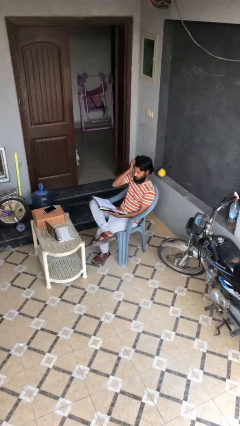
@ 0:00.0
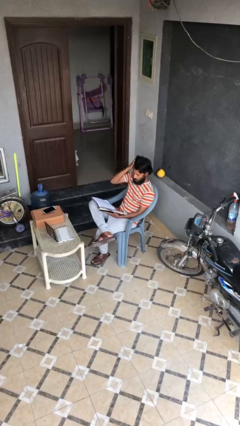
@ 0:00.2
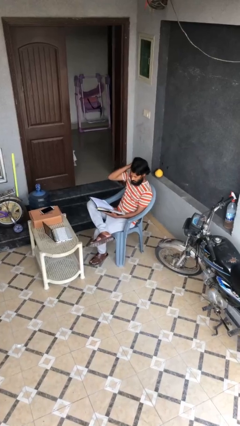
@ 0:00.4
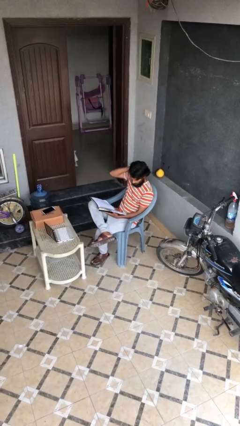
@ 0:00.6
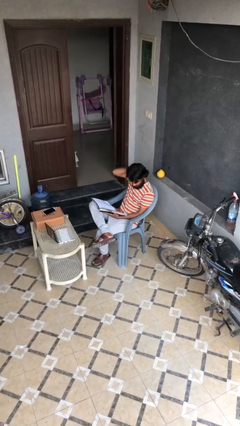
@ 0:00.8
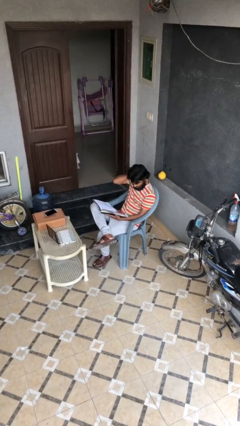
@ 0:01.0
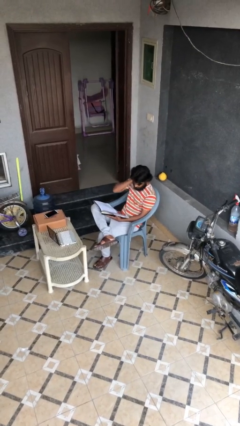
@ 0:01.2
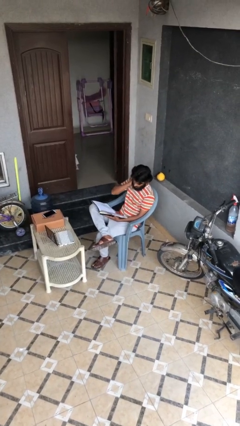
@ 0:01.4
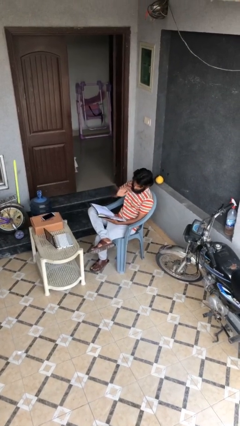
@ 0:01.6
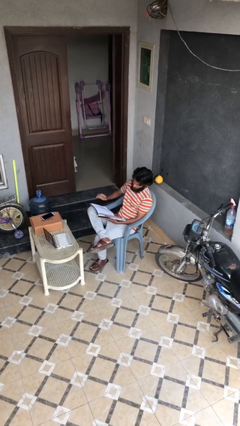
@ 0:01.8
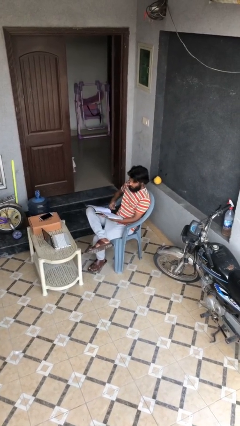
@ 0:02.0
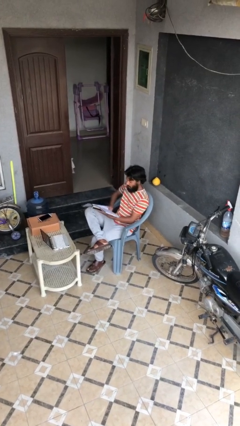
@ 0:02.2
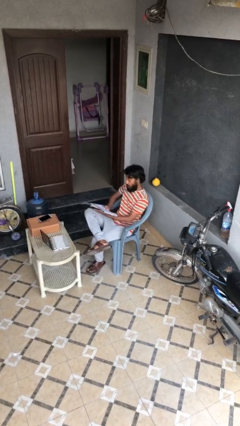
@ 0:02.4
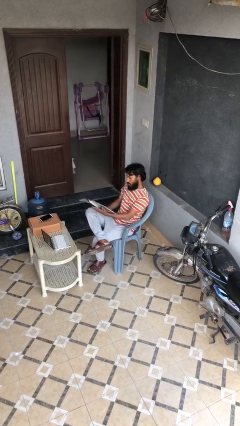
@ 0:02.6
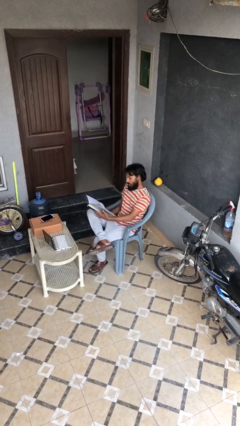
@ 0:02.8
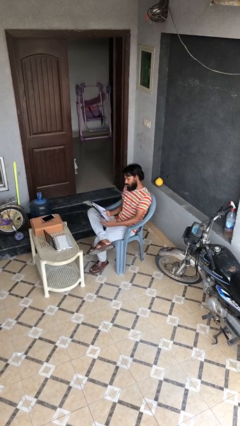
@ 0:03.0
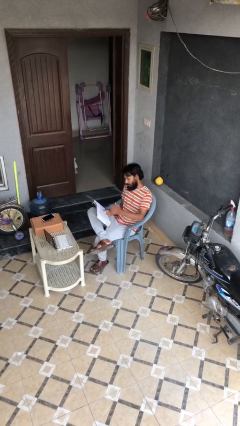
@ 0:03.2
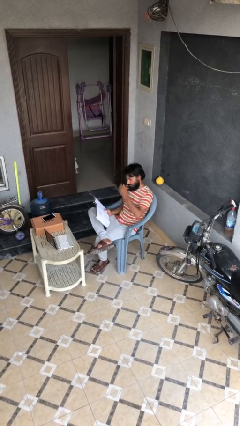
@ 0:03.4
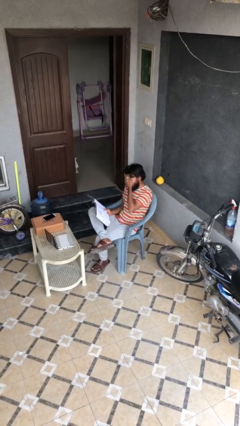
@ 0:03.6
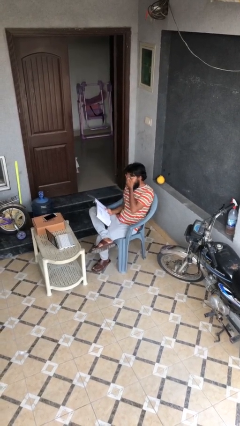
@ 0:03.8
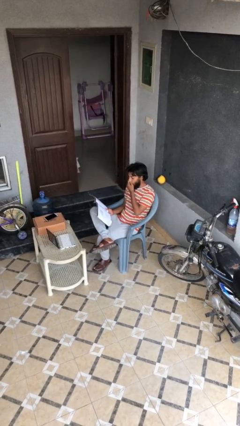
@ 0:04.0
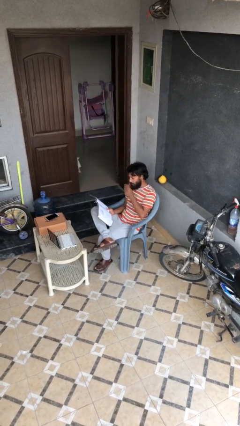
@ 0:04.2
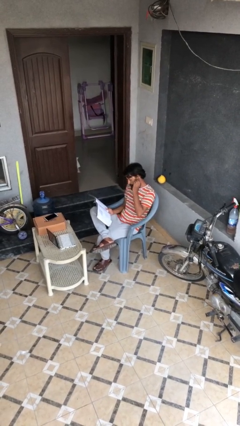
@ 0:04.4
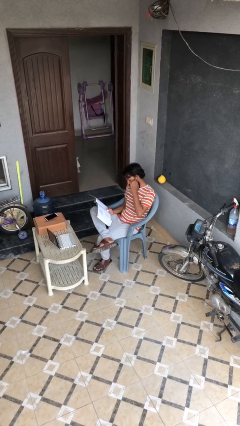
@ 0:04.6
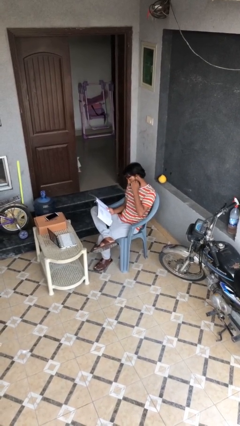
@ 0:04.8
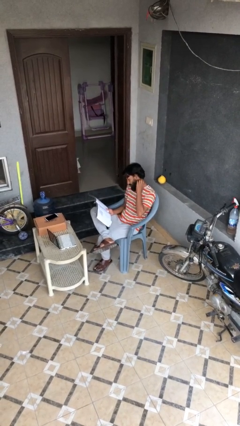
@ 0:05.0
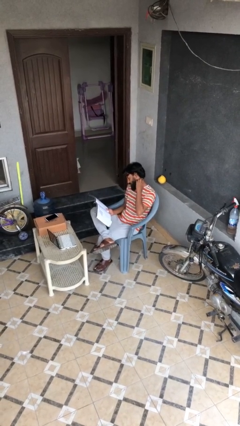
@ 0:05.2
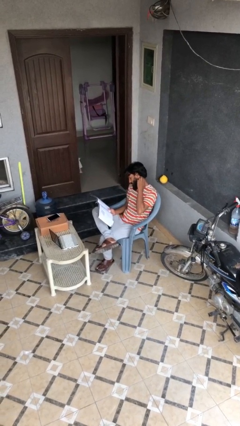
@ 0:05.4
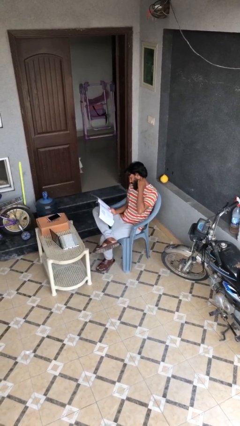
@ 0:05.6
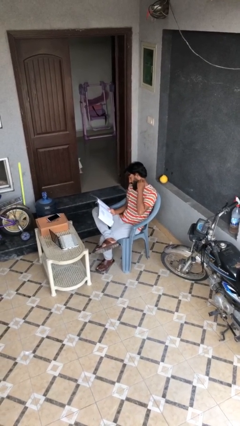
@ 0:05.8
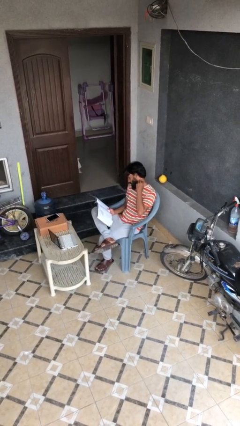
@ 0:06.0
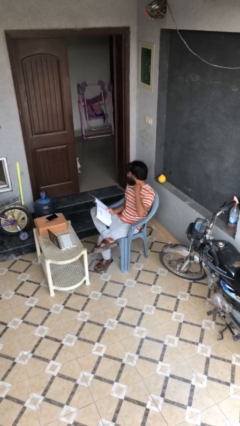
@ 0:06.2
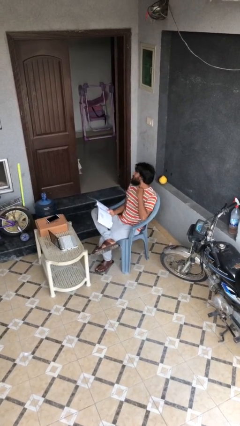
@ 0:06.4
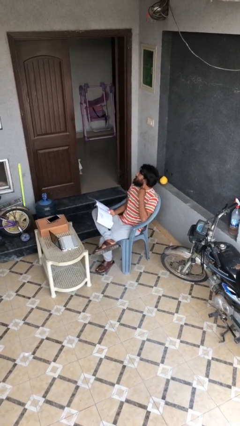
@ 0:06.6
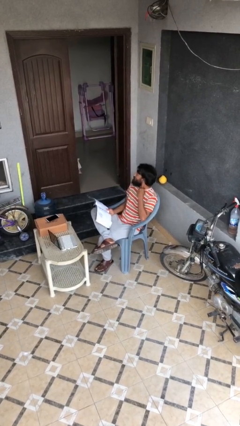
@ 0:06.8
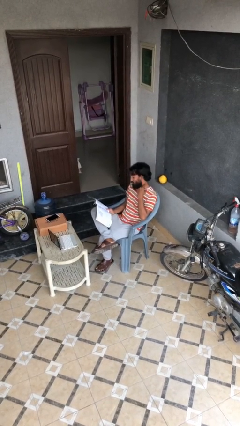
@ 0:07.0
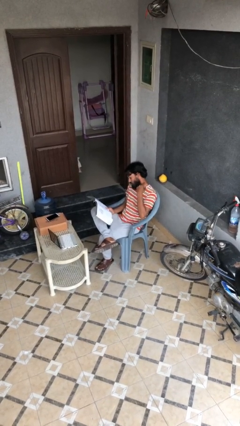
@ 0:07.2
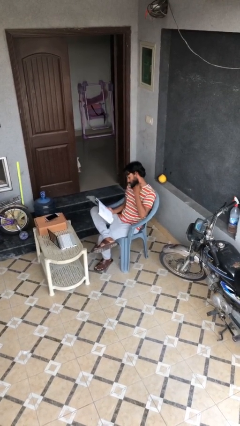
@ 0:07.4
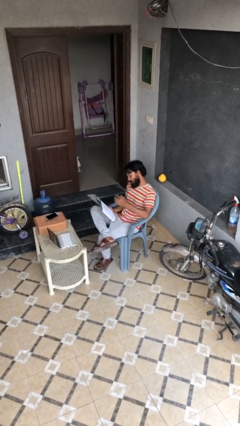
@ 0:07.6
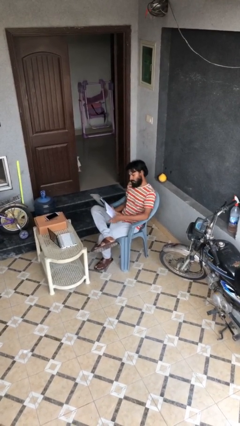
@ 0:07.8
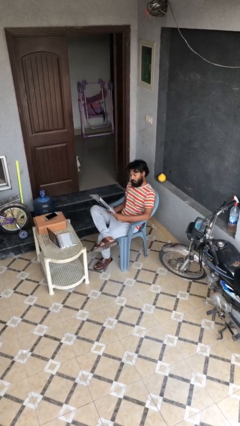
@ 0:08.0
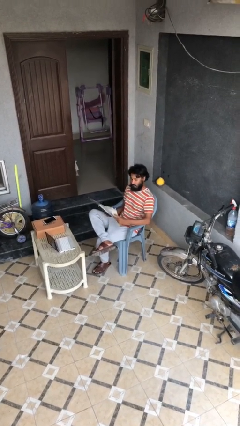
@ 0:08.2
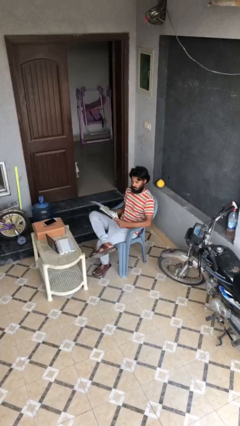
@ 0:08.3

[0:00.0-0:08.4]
person reads document

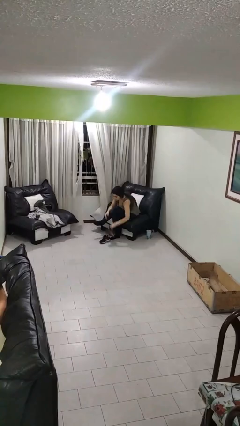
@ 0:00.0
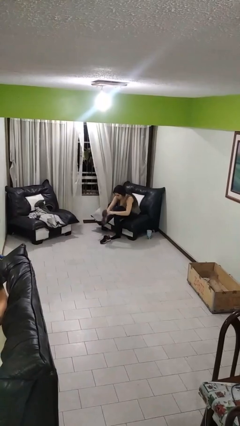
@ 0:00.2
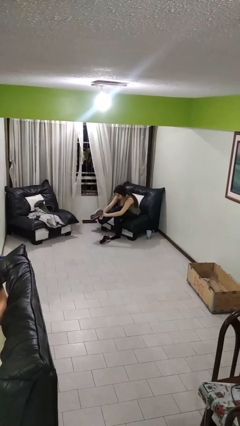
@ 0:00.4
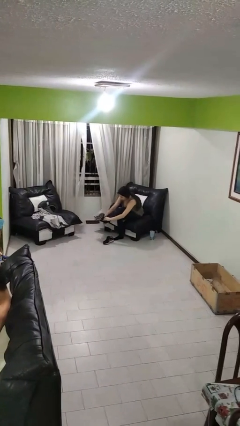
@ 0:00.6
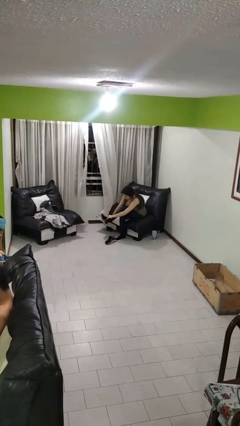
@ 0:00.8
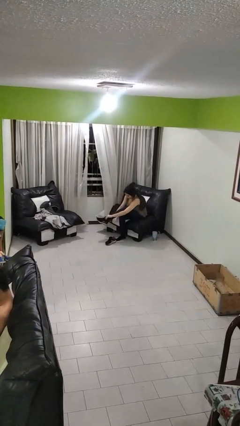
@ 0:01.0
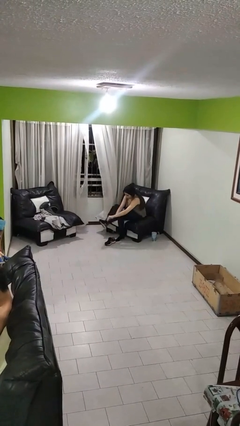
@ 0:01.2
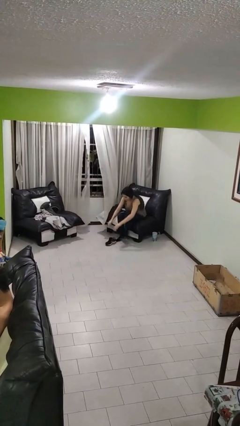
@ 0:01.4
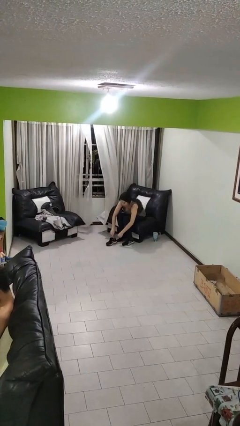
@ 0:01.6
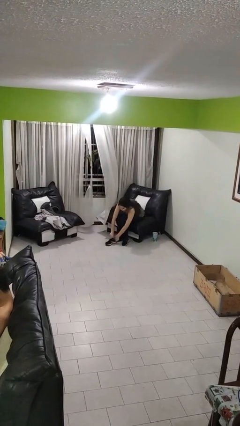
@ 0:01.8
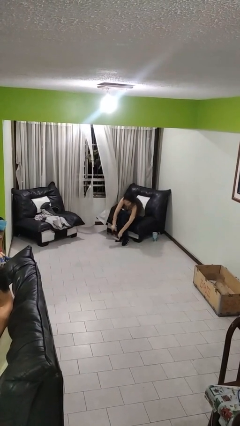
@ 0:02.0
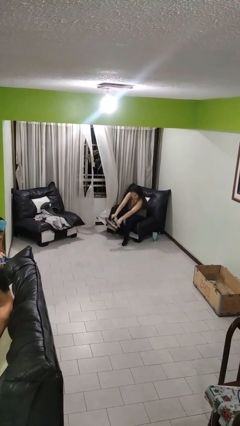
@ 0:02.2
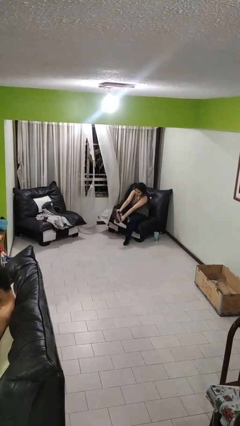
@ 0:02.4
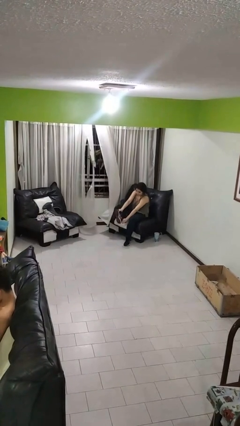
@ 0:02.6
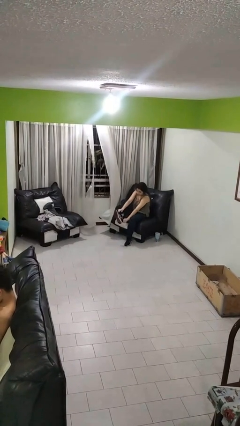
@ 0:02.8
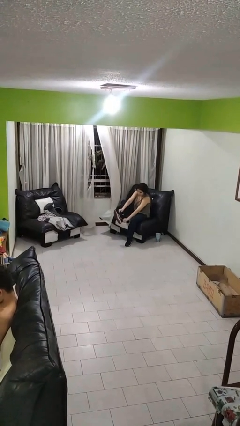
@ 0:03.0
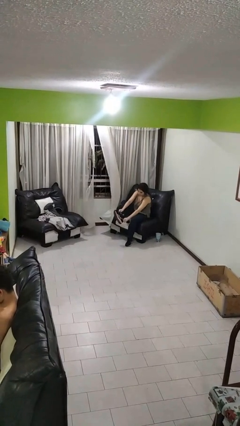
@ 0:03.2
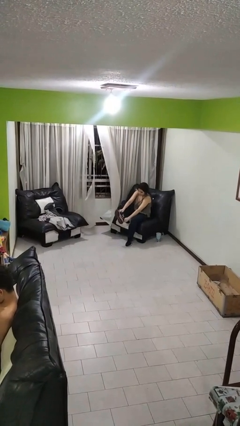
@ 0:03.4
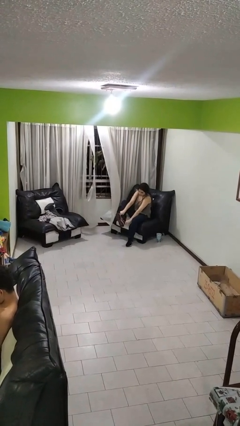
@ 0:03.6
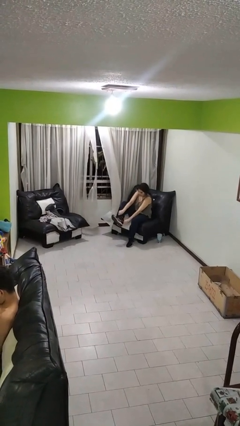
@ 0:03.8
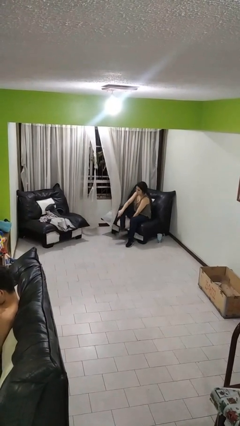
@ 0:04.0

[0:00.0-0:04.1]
person puts on shoes

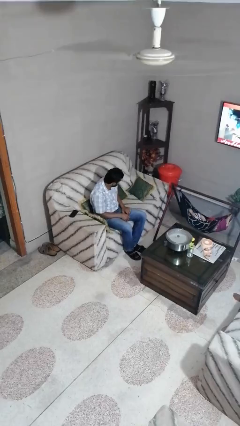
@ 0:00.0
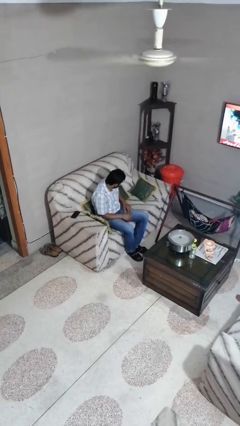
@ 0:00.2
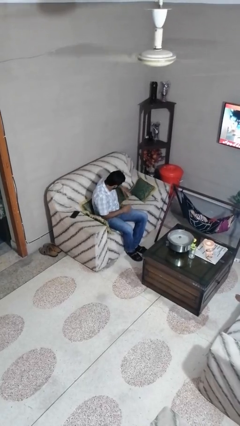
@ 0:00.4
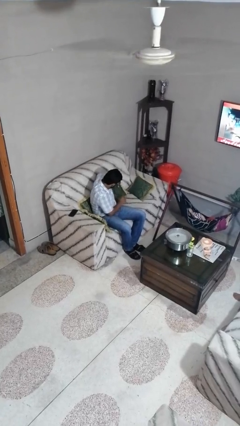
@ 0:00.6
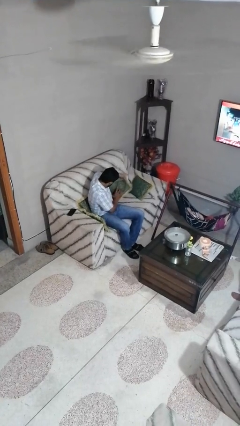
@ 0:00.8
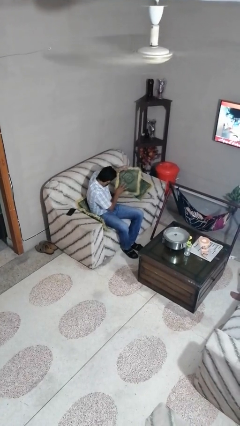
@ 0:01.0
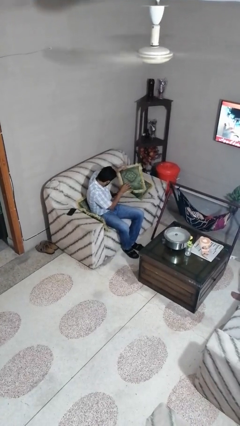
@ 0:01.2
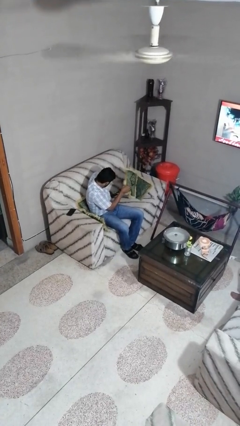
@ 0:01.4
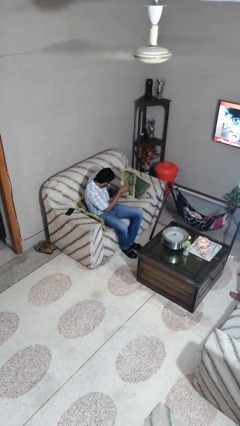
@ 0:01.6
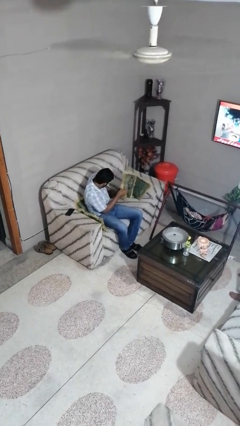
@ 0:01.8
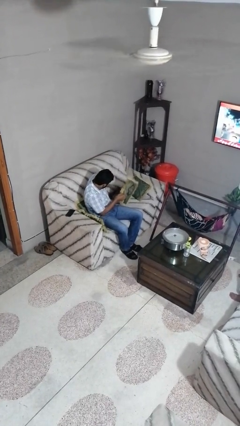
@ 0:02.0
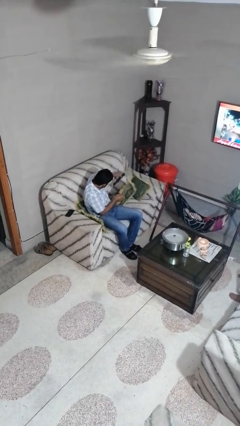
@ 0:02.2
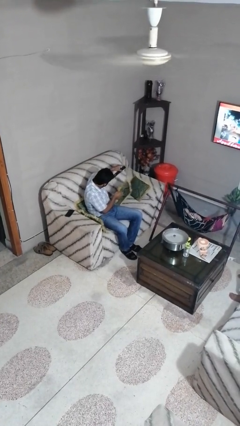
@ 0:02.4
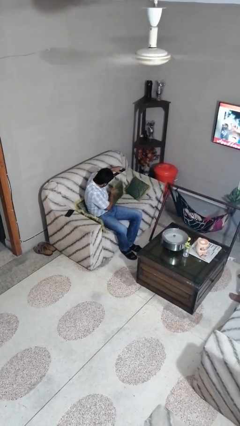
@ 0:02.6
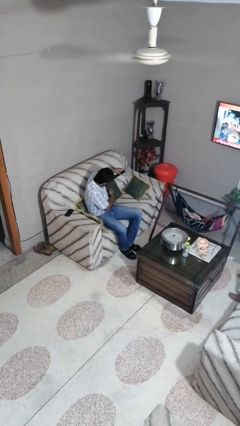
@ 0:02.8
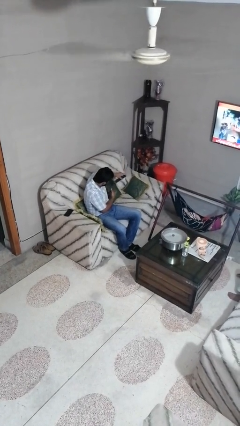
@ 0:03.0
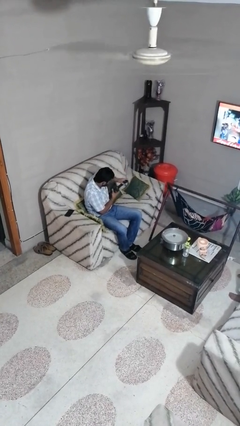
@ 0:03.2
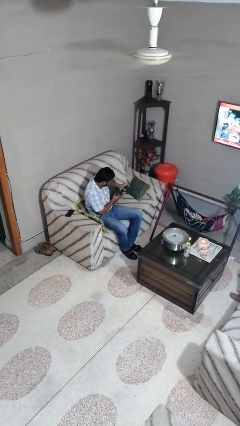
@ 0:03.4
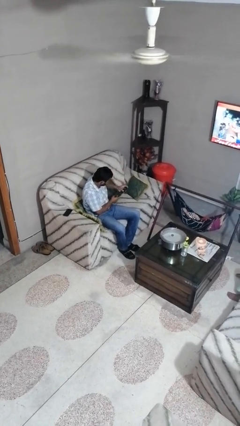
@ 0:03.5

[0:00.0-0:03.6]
person searches in couch

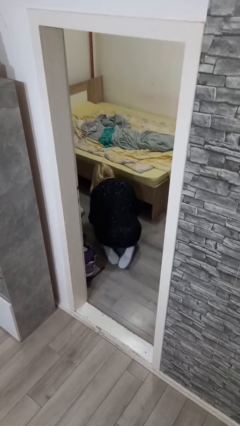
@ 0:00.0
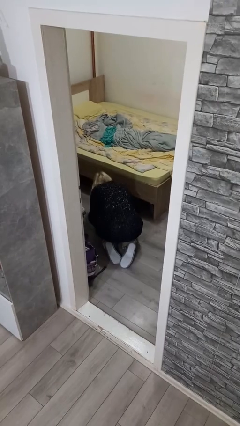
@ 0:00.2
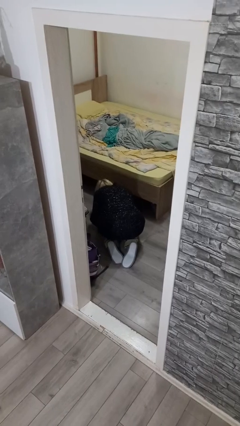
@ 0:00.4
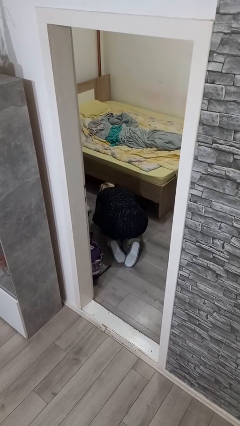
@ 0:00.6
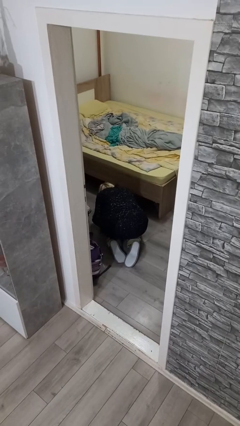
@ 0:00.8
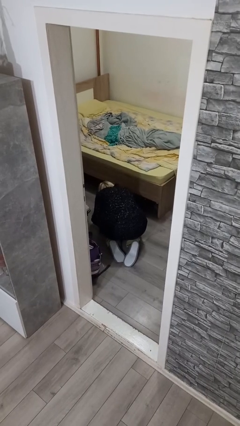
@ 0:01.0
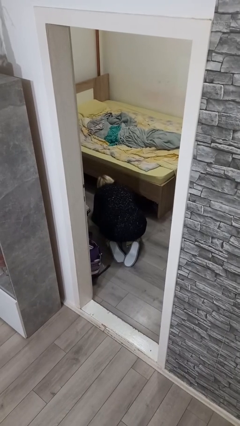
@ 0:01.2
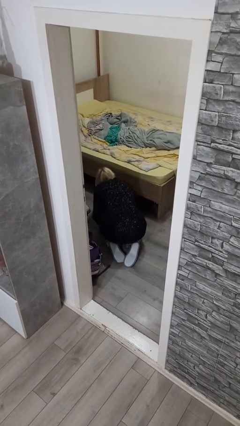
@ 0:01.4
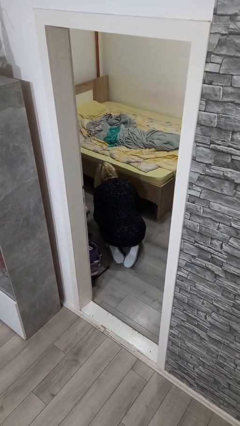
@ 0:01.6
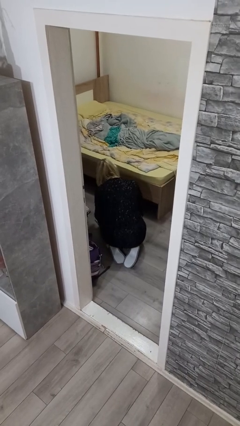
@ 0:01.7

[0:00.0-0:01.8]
person searches under bed
